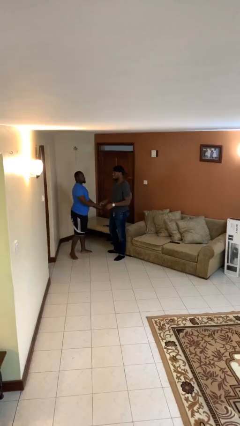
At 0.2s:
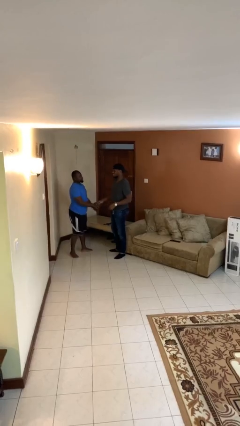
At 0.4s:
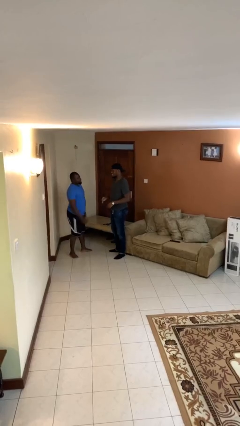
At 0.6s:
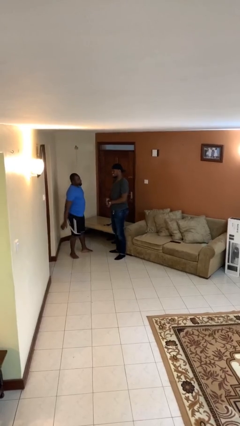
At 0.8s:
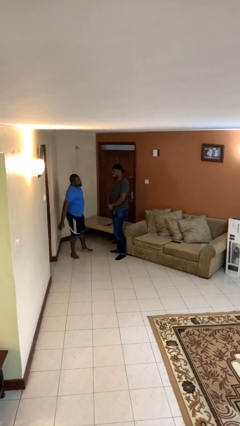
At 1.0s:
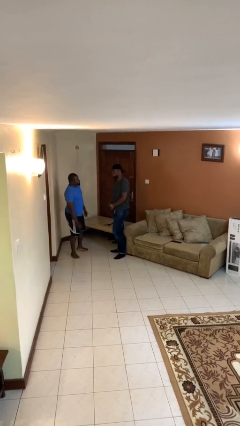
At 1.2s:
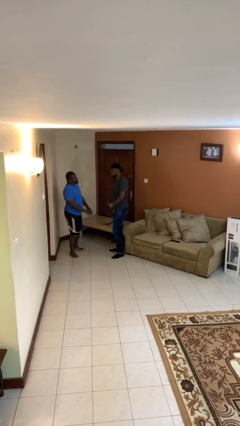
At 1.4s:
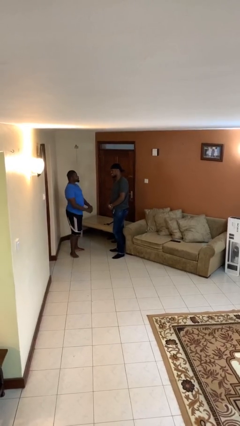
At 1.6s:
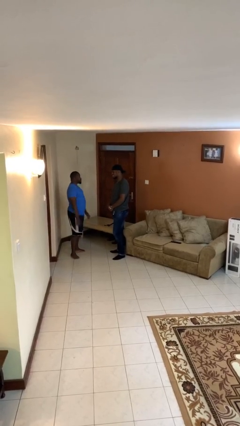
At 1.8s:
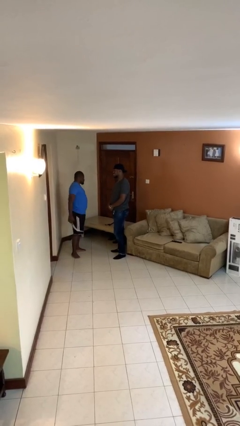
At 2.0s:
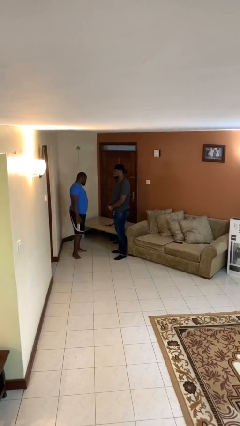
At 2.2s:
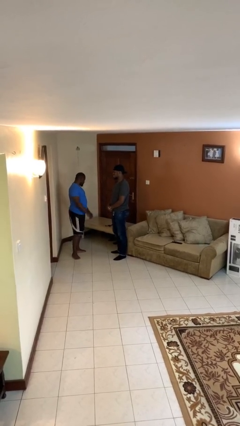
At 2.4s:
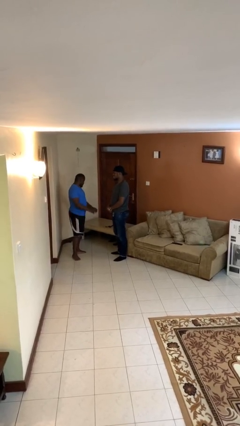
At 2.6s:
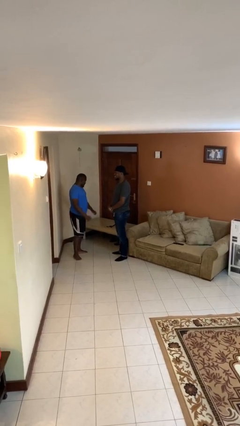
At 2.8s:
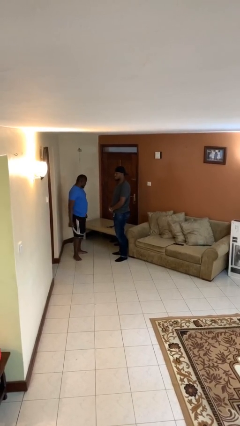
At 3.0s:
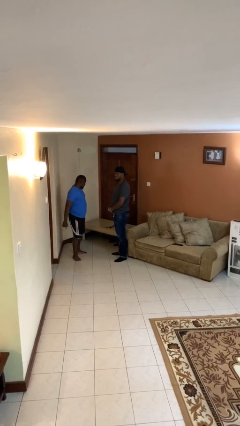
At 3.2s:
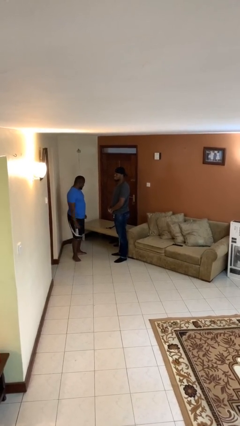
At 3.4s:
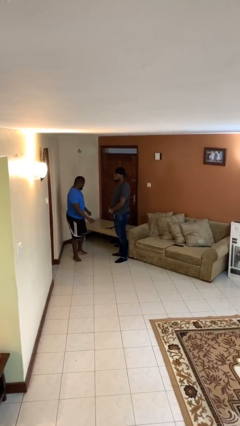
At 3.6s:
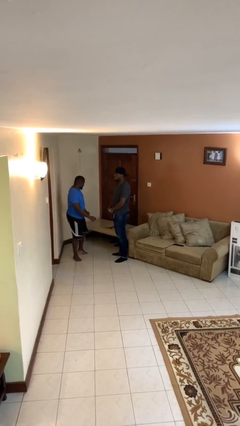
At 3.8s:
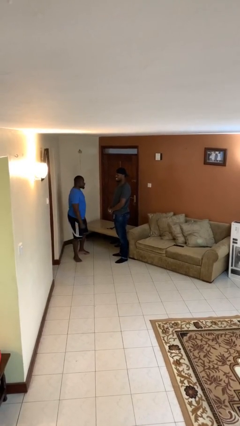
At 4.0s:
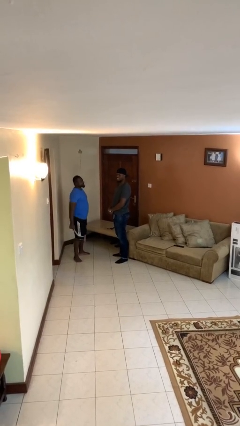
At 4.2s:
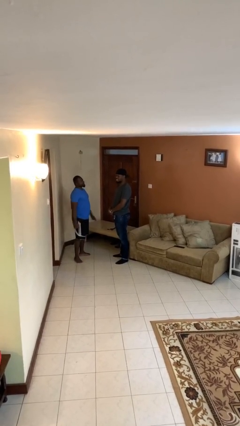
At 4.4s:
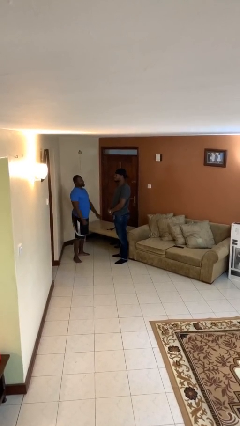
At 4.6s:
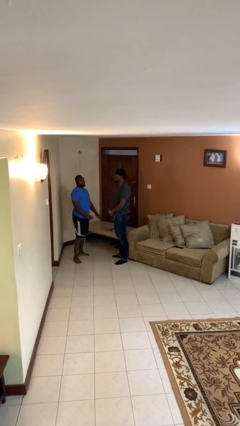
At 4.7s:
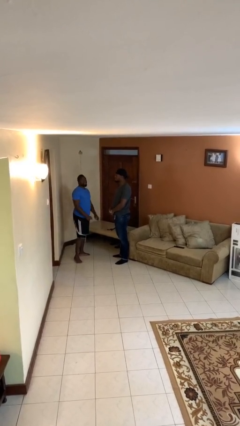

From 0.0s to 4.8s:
person talks to person

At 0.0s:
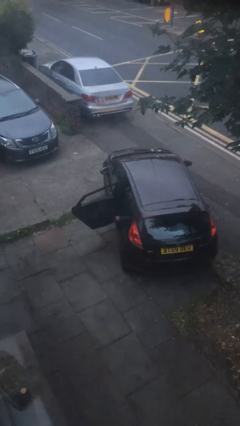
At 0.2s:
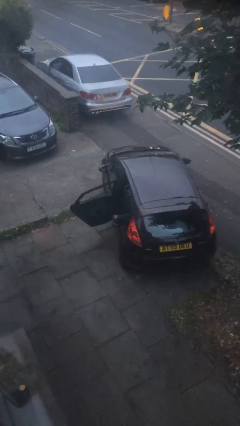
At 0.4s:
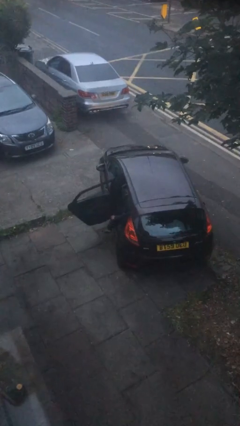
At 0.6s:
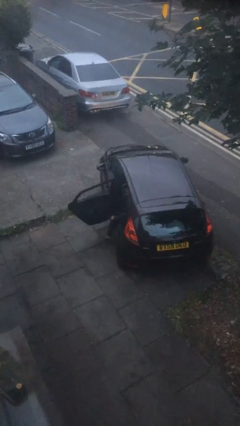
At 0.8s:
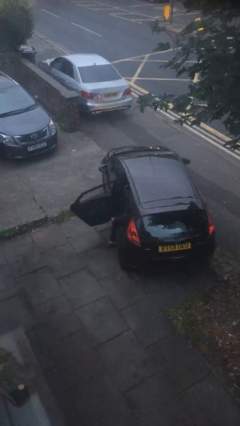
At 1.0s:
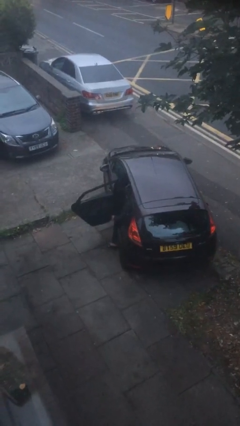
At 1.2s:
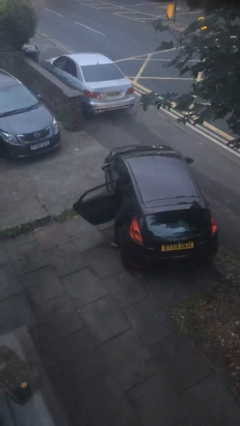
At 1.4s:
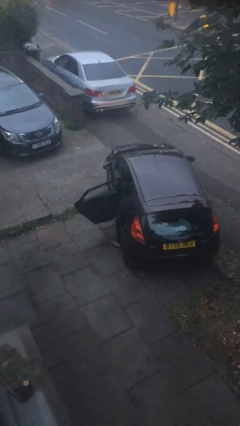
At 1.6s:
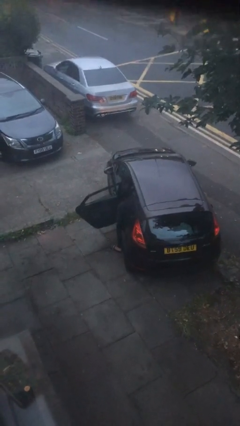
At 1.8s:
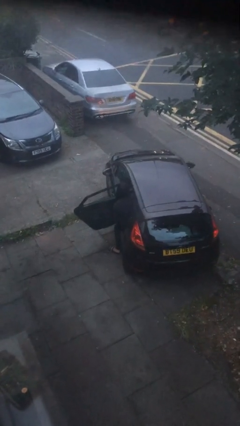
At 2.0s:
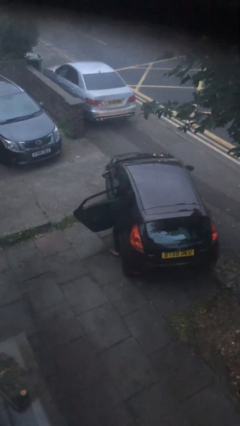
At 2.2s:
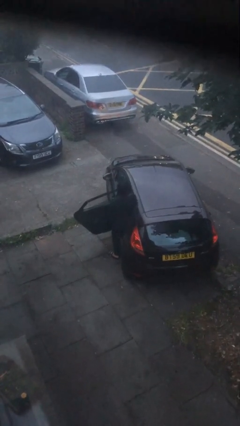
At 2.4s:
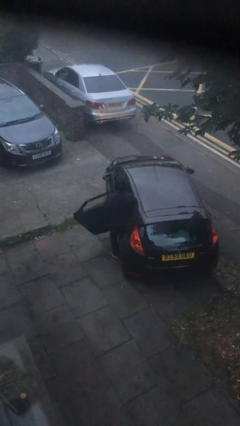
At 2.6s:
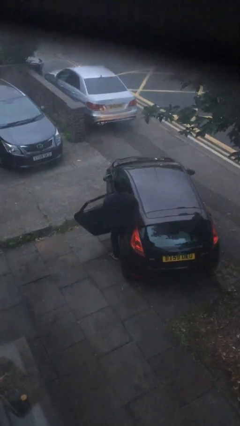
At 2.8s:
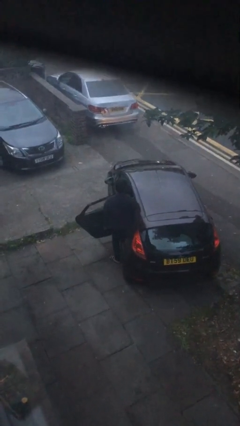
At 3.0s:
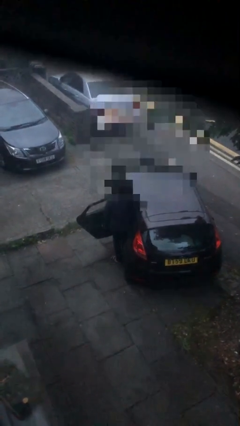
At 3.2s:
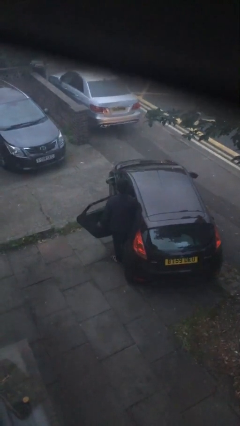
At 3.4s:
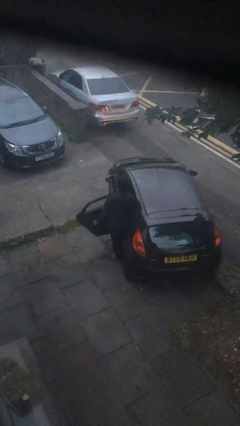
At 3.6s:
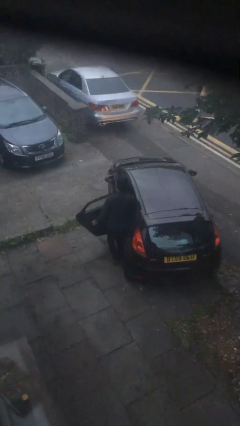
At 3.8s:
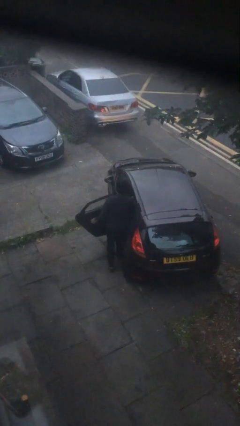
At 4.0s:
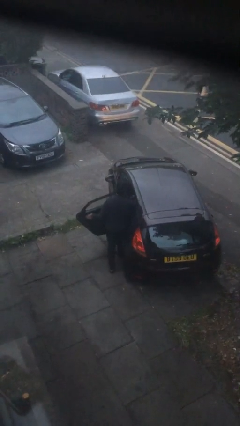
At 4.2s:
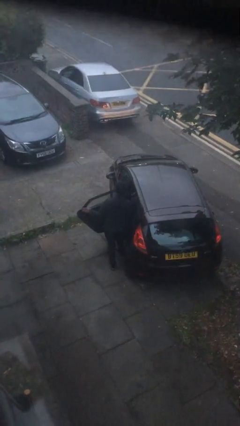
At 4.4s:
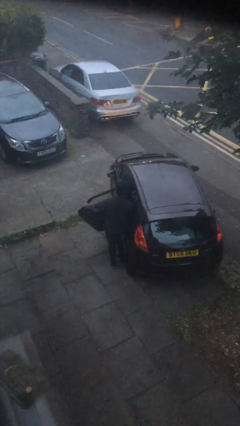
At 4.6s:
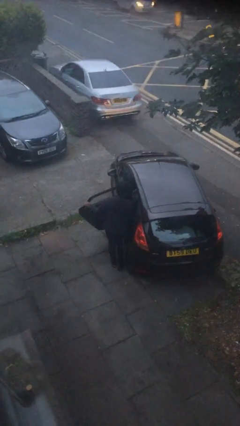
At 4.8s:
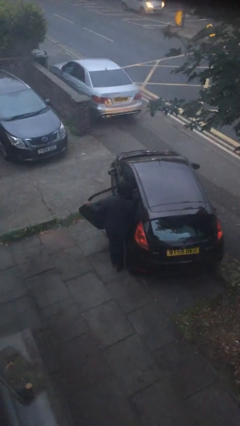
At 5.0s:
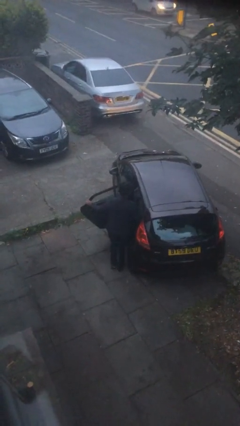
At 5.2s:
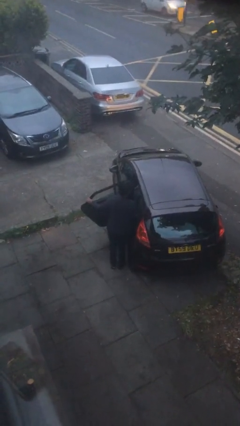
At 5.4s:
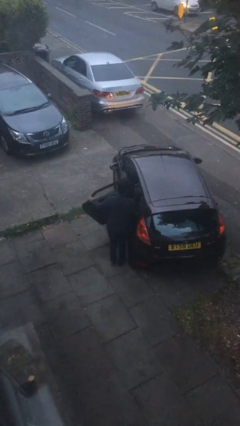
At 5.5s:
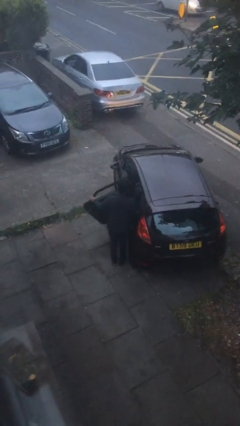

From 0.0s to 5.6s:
person exits car

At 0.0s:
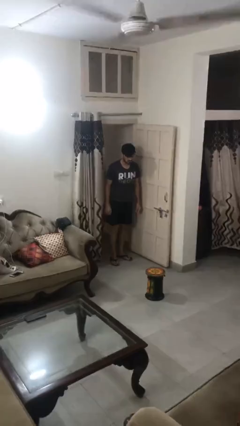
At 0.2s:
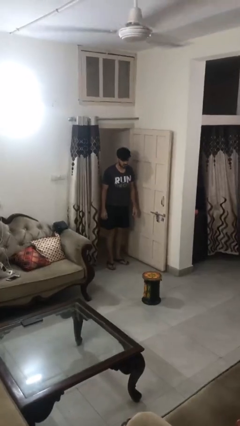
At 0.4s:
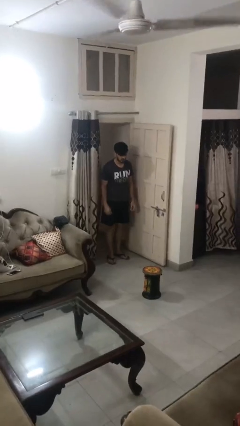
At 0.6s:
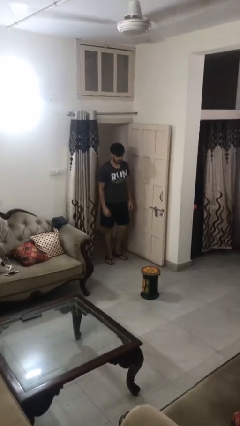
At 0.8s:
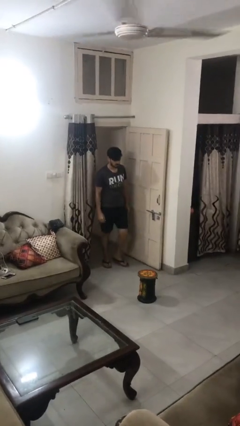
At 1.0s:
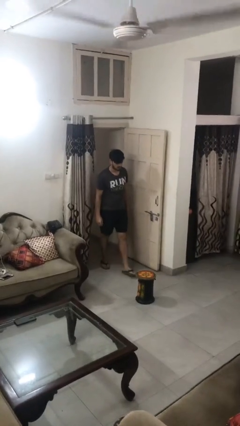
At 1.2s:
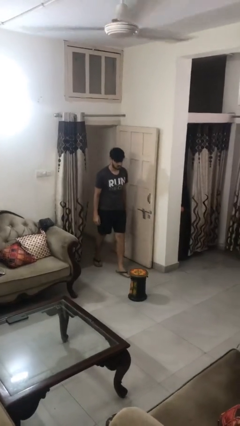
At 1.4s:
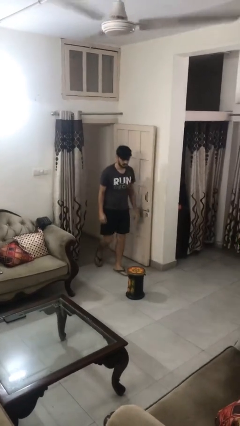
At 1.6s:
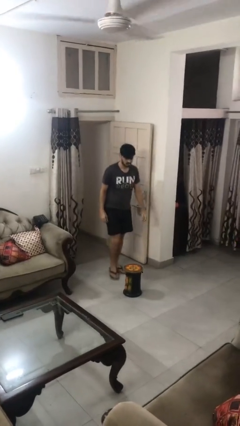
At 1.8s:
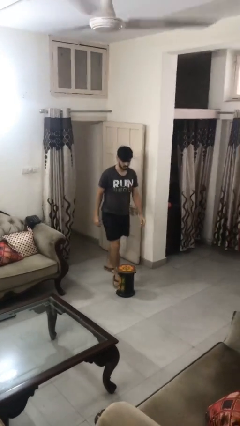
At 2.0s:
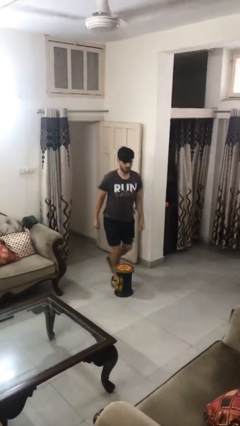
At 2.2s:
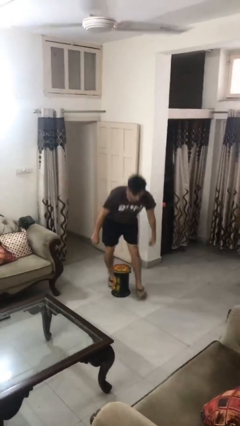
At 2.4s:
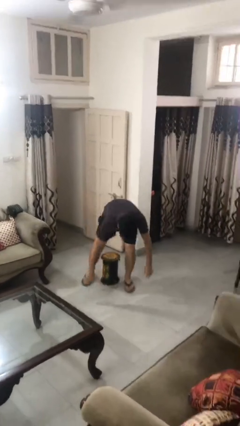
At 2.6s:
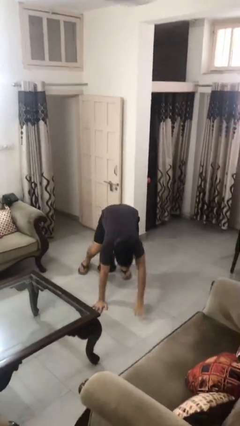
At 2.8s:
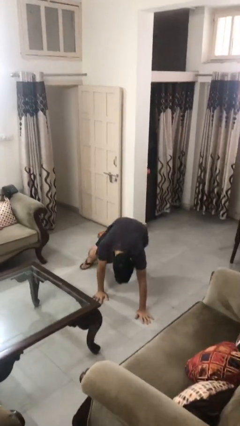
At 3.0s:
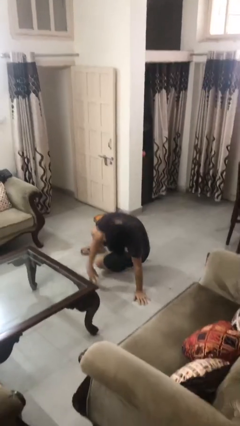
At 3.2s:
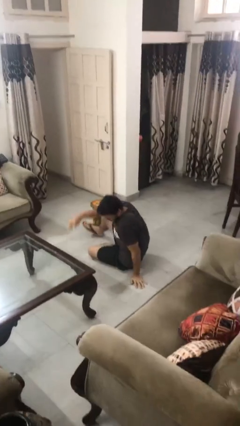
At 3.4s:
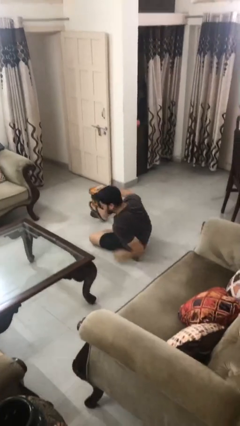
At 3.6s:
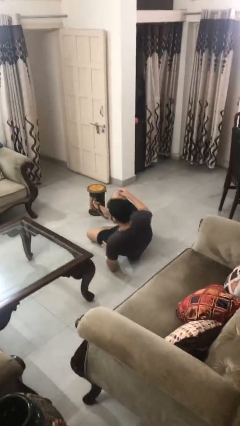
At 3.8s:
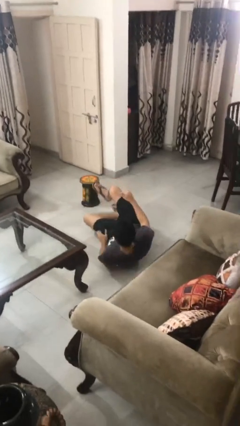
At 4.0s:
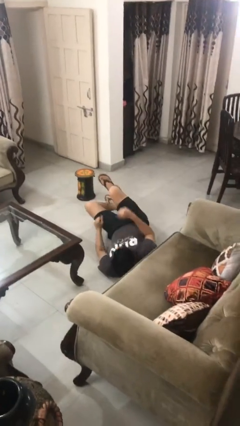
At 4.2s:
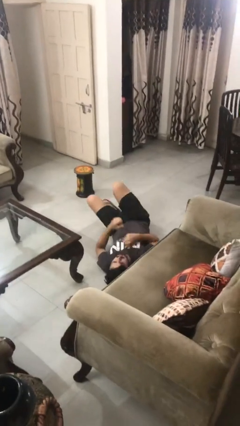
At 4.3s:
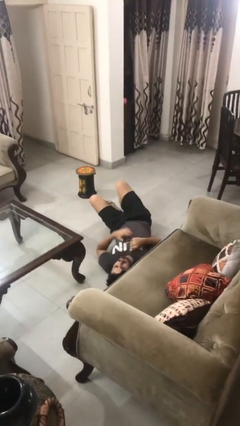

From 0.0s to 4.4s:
person trips on object on floor

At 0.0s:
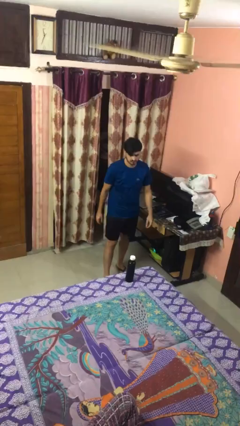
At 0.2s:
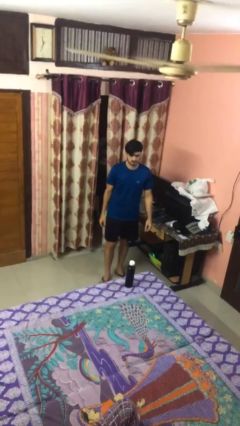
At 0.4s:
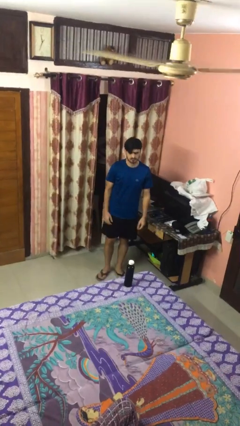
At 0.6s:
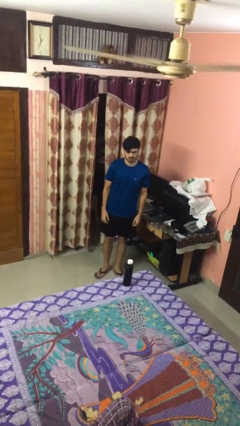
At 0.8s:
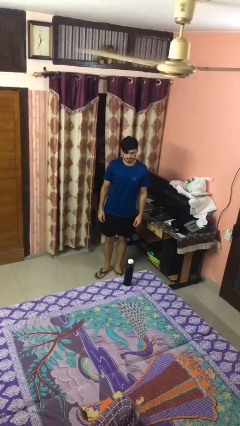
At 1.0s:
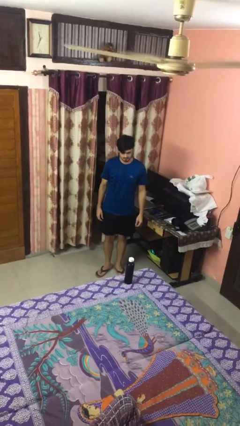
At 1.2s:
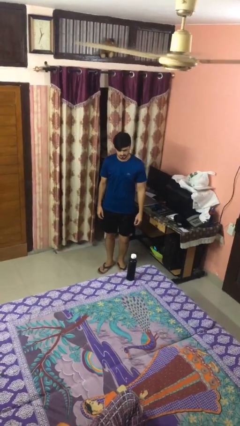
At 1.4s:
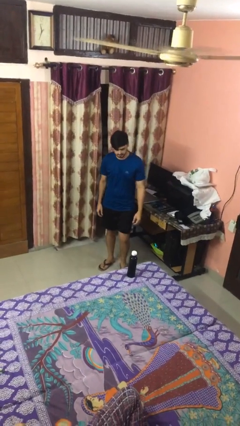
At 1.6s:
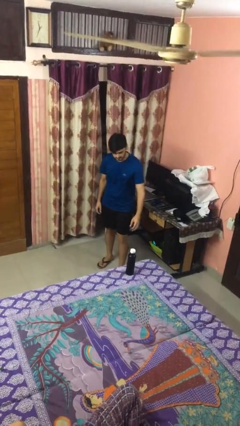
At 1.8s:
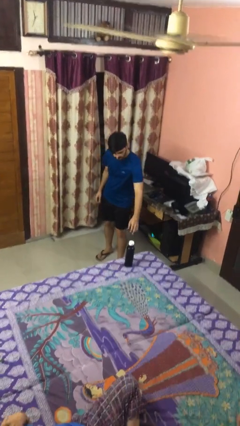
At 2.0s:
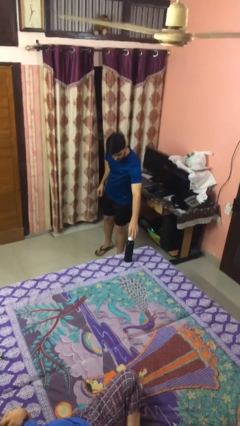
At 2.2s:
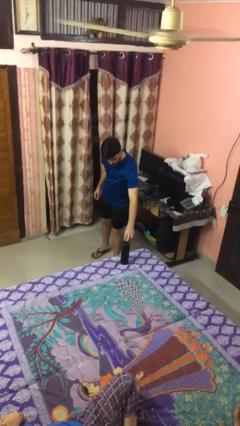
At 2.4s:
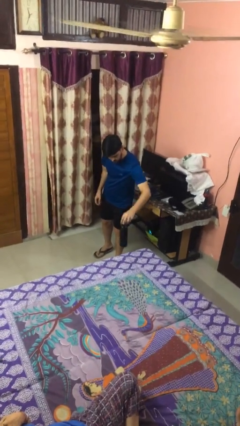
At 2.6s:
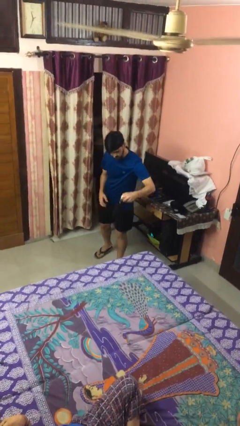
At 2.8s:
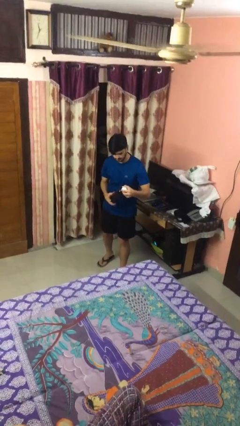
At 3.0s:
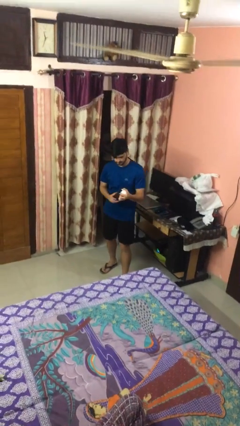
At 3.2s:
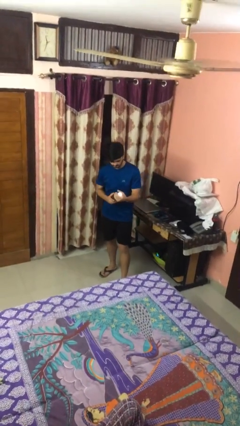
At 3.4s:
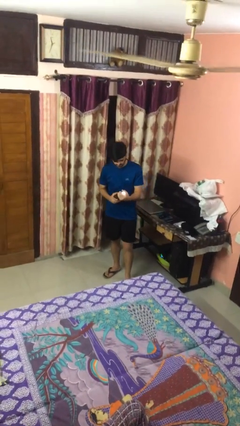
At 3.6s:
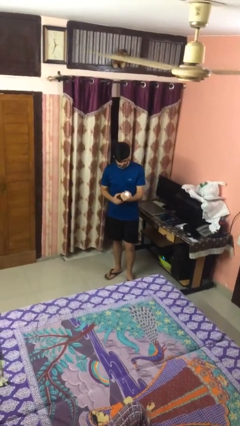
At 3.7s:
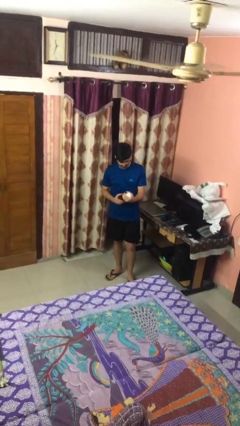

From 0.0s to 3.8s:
person picks up object from bed
